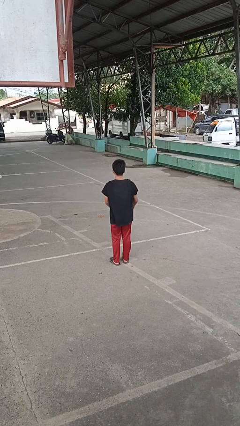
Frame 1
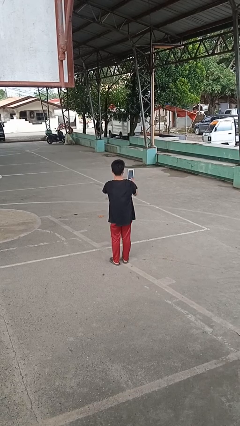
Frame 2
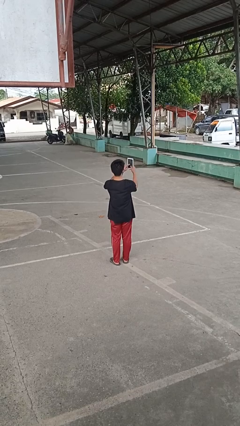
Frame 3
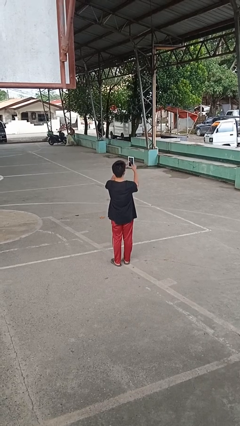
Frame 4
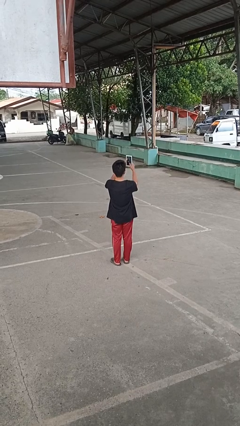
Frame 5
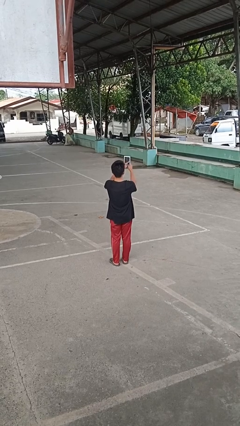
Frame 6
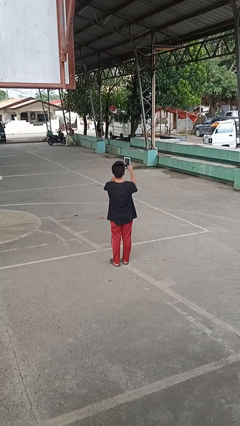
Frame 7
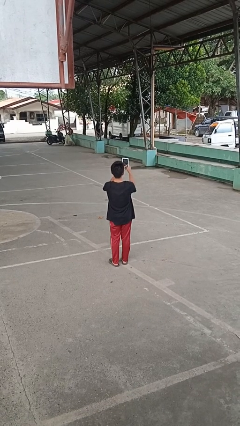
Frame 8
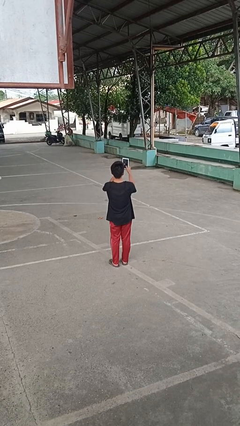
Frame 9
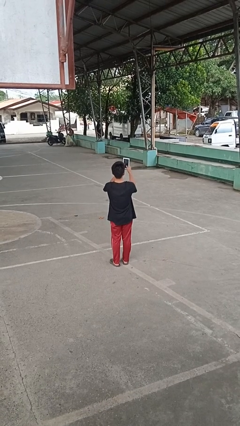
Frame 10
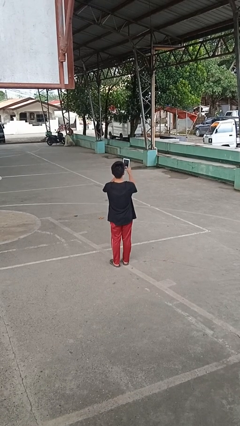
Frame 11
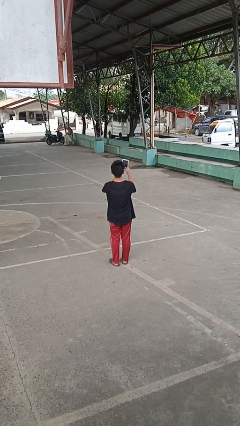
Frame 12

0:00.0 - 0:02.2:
person interacts with tablet

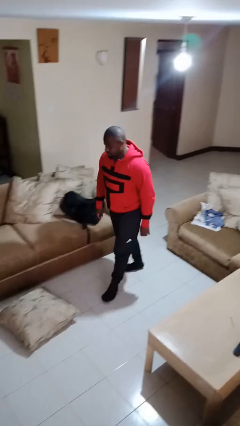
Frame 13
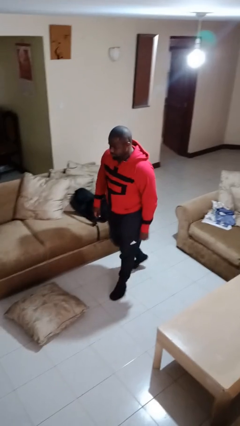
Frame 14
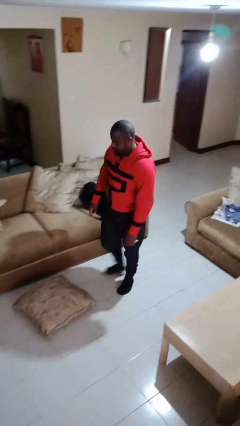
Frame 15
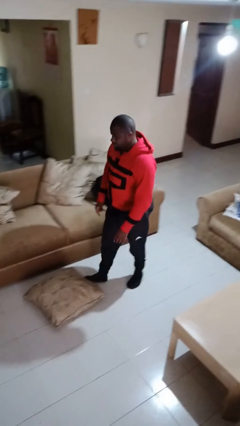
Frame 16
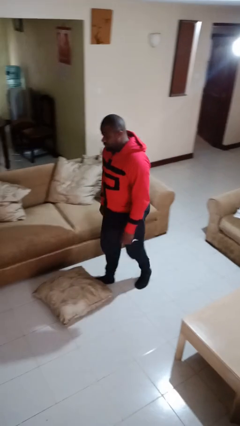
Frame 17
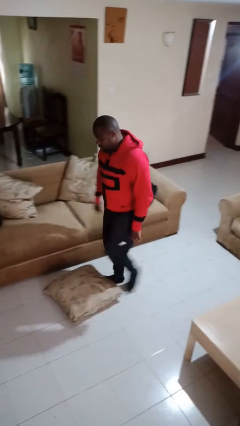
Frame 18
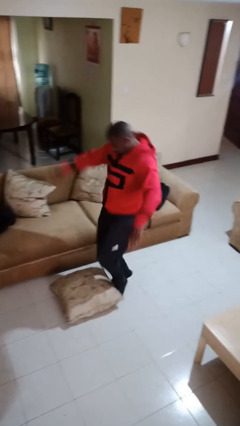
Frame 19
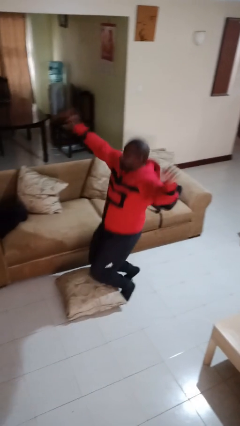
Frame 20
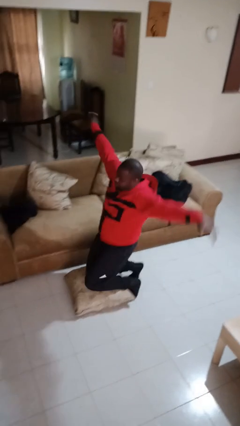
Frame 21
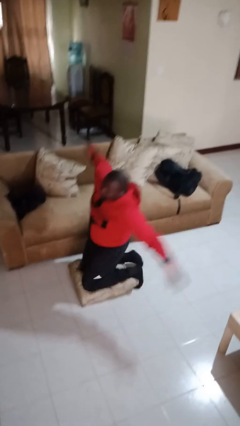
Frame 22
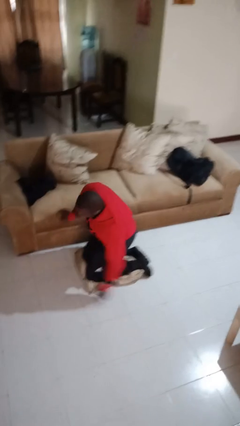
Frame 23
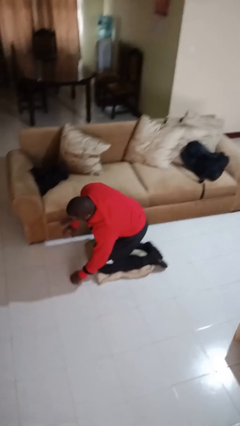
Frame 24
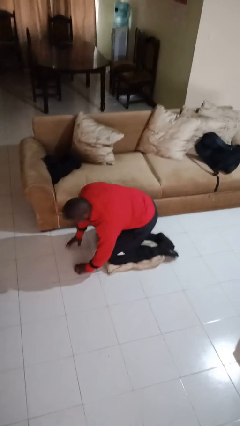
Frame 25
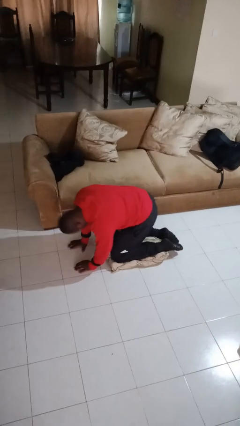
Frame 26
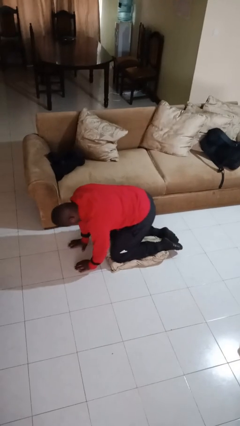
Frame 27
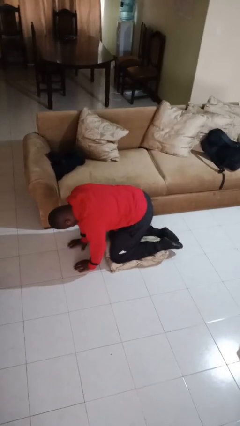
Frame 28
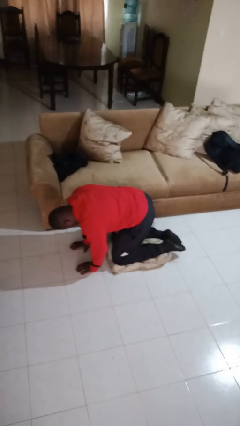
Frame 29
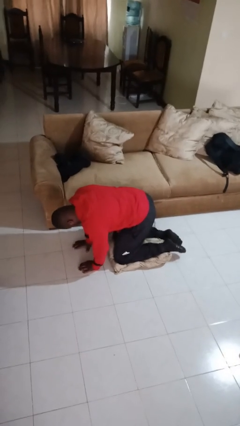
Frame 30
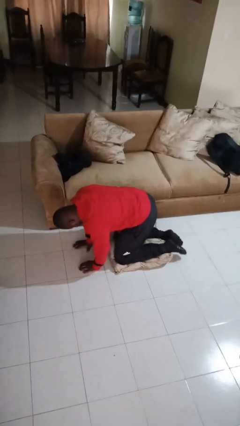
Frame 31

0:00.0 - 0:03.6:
person trips on object on floor

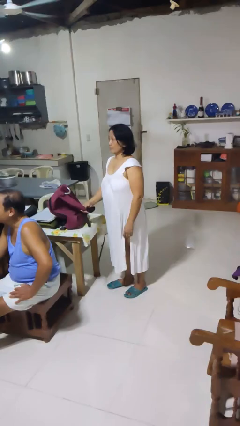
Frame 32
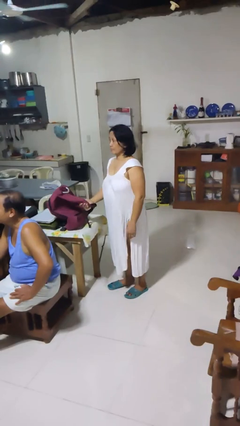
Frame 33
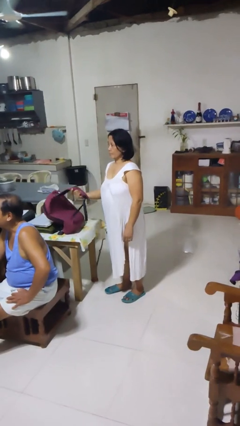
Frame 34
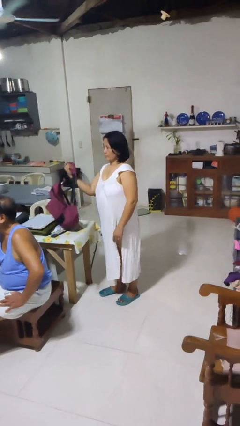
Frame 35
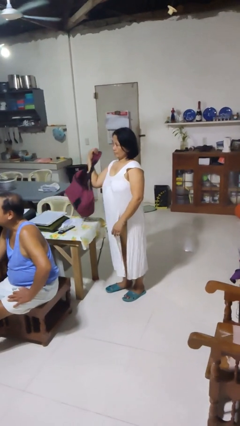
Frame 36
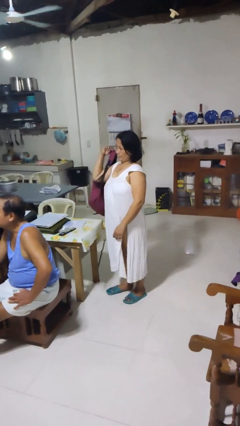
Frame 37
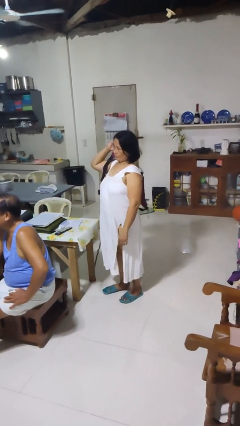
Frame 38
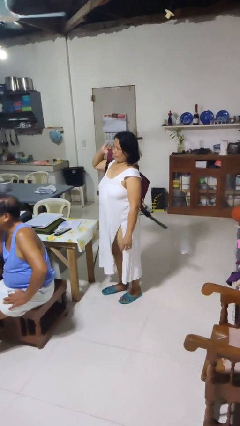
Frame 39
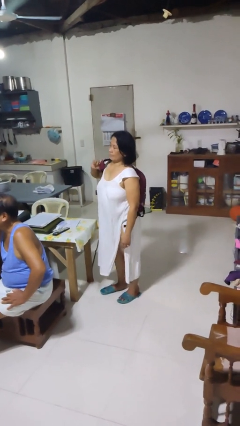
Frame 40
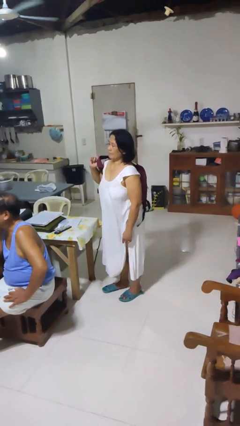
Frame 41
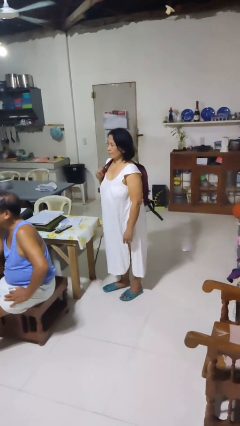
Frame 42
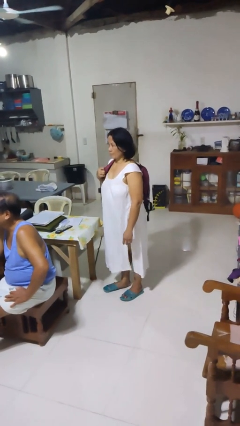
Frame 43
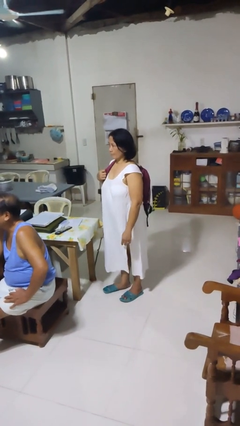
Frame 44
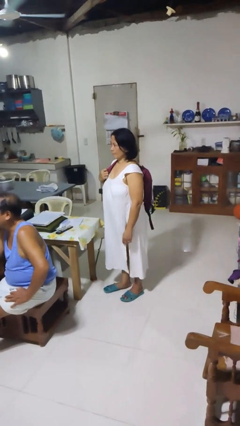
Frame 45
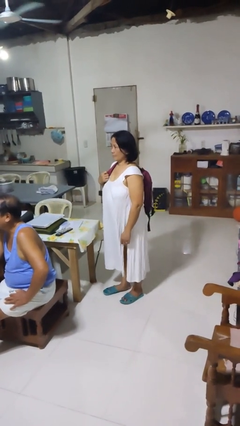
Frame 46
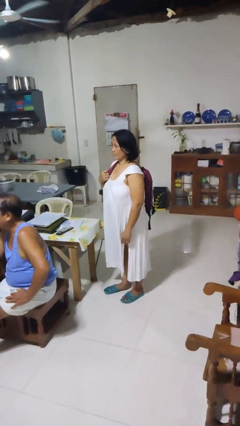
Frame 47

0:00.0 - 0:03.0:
person puts on backpack

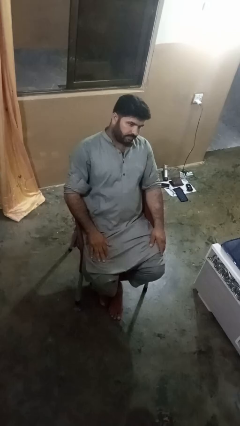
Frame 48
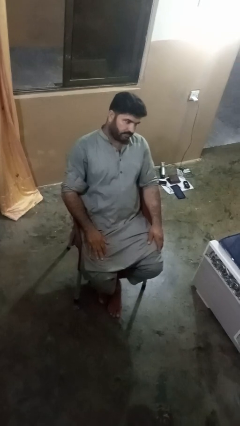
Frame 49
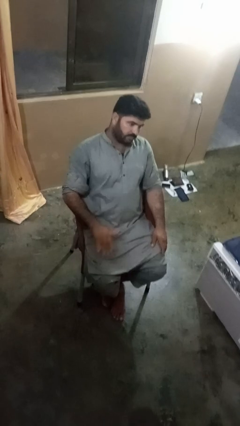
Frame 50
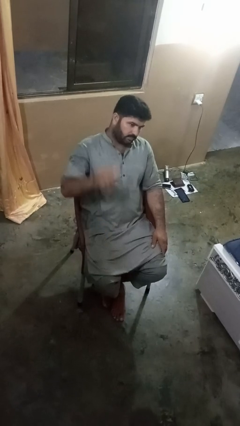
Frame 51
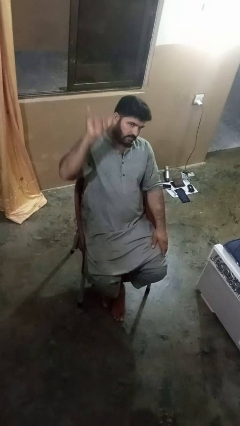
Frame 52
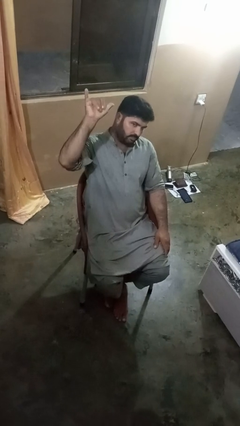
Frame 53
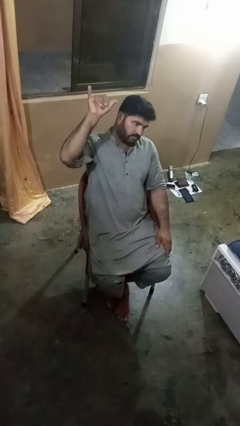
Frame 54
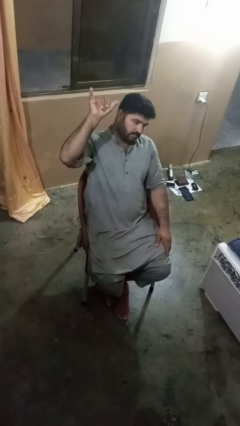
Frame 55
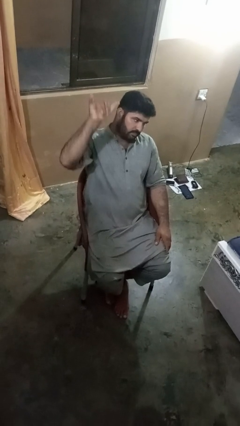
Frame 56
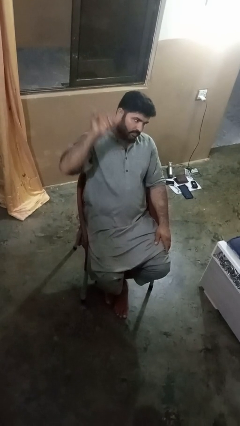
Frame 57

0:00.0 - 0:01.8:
person gestures hang loose

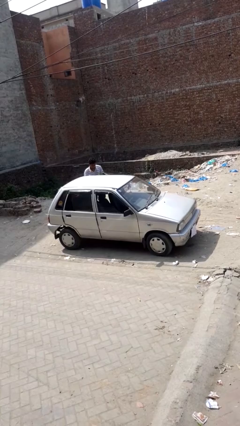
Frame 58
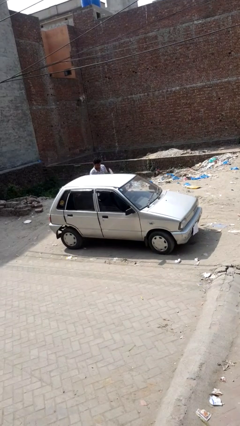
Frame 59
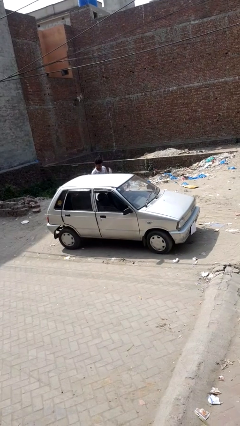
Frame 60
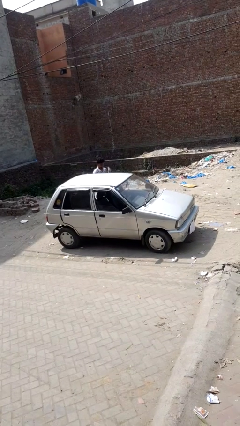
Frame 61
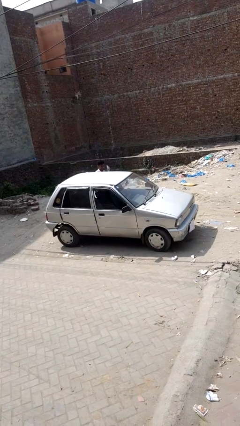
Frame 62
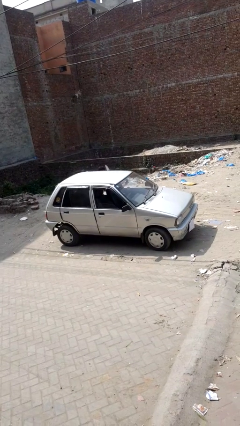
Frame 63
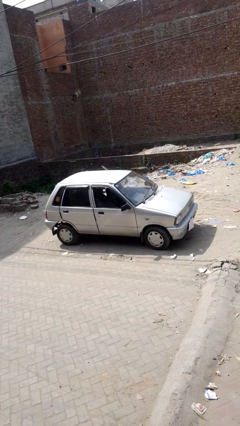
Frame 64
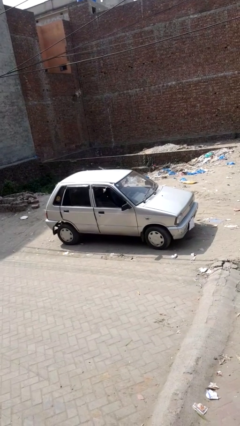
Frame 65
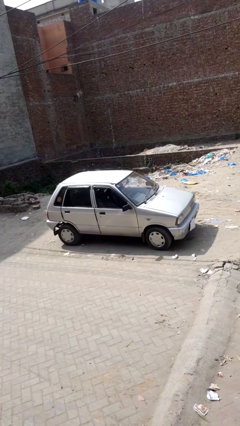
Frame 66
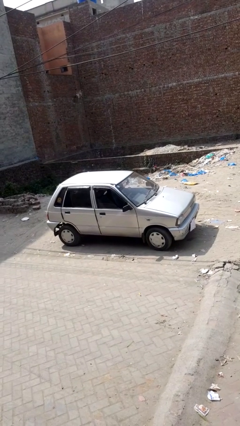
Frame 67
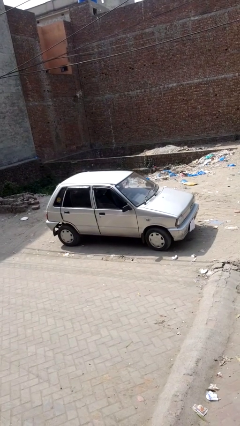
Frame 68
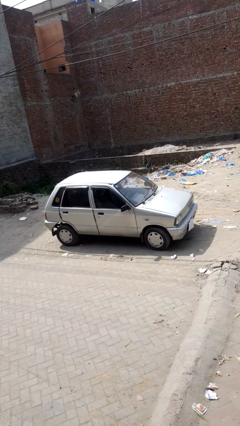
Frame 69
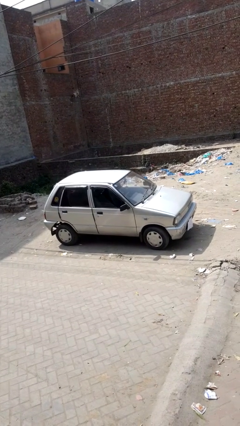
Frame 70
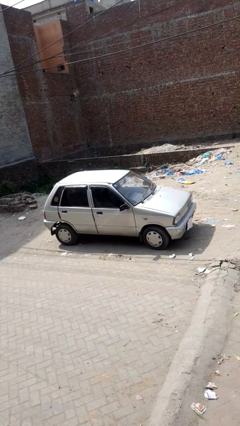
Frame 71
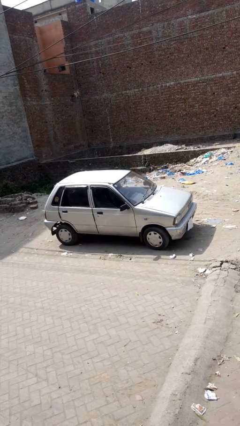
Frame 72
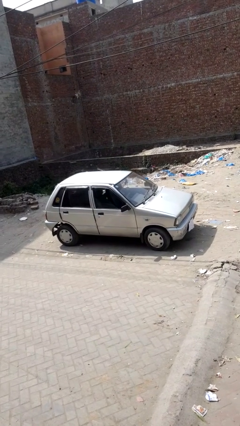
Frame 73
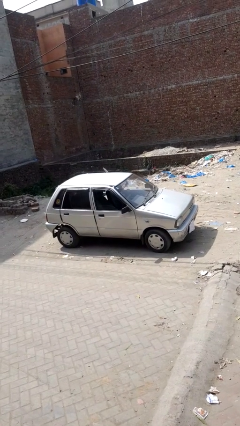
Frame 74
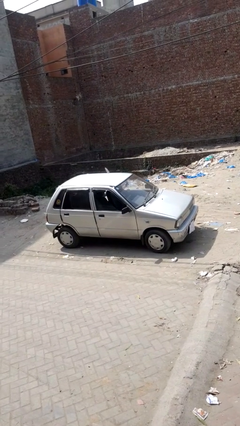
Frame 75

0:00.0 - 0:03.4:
car picks up person

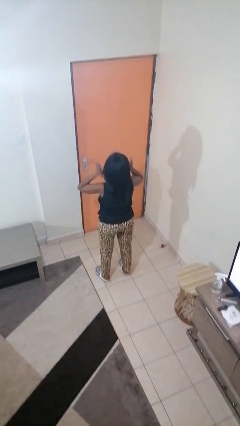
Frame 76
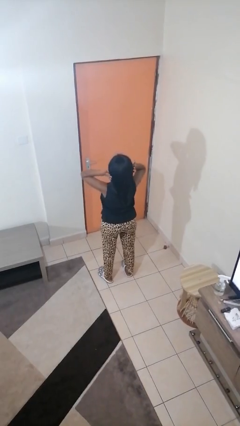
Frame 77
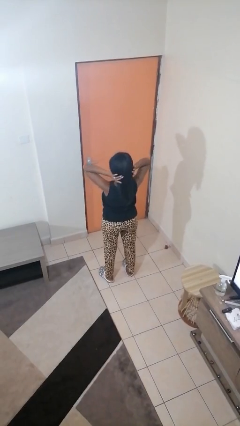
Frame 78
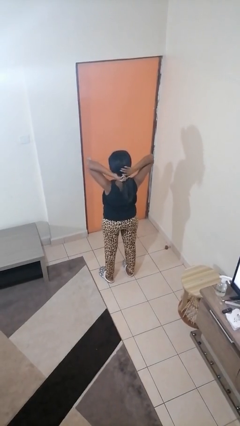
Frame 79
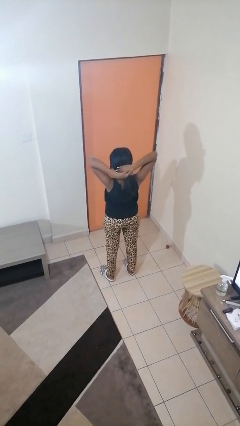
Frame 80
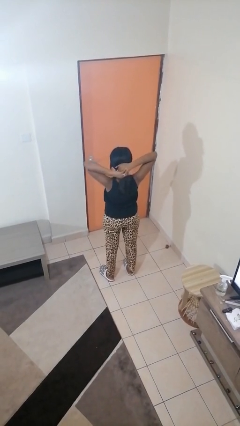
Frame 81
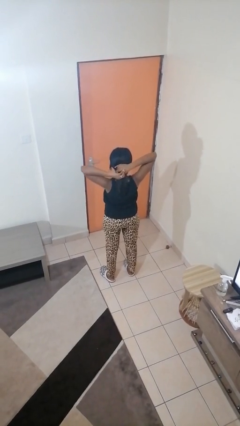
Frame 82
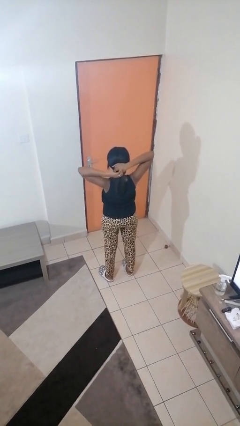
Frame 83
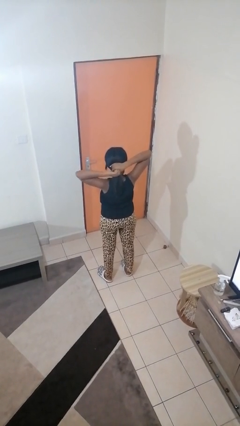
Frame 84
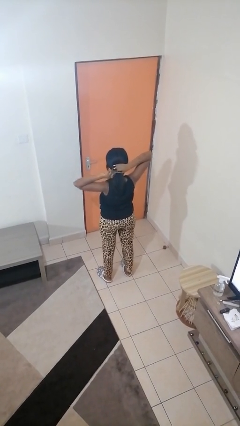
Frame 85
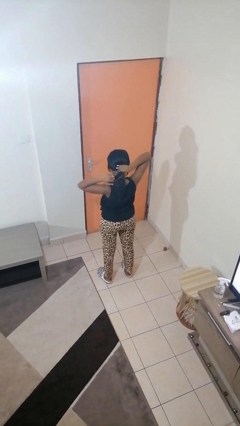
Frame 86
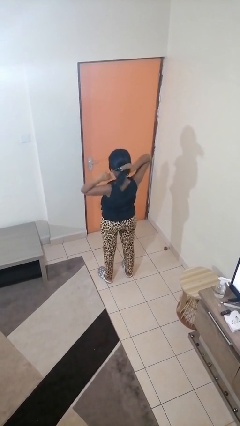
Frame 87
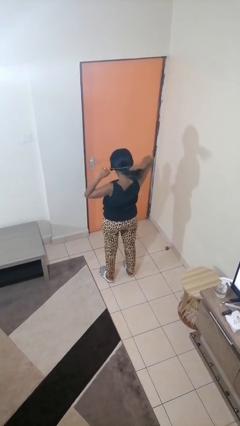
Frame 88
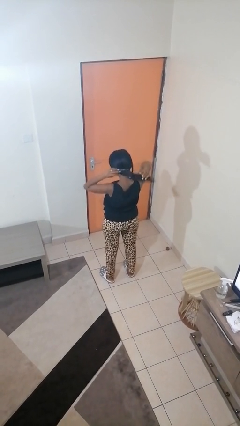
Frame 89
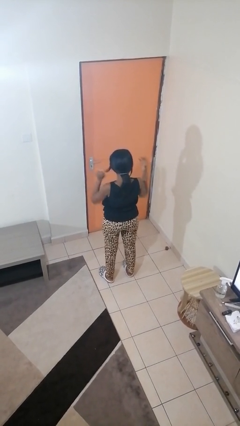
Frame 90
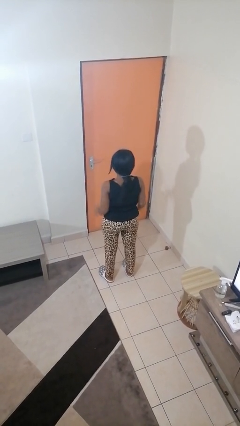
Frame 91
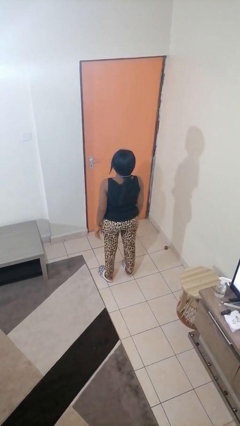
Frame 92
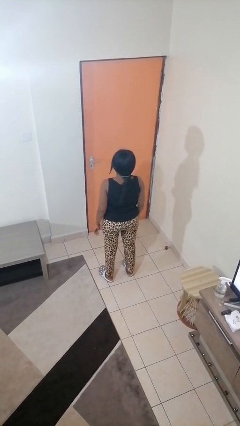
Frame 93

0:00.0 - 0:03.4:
person puts hair in ponytail
